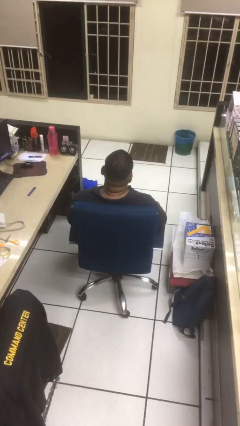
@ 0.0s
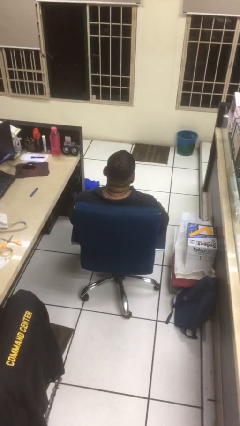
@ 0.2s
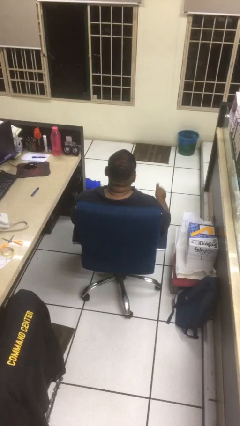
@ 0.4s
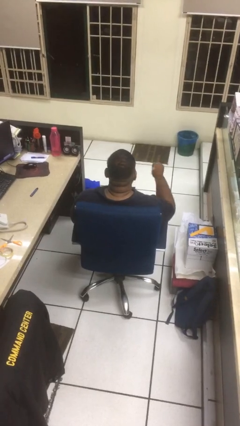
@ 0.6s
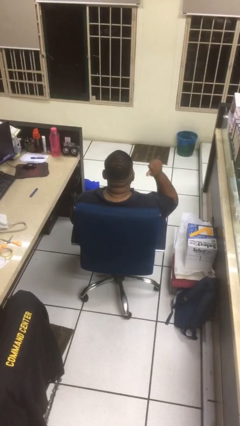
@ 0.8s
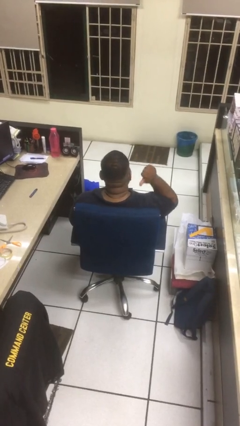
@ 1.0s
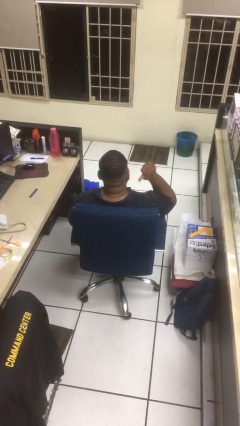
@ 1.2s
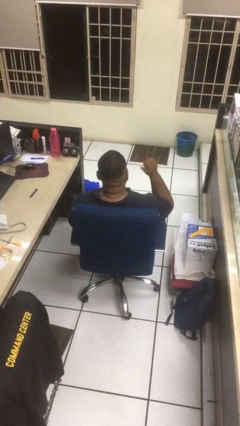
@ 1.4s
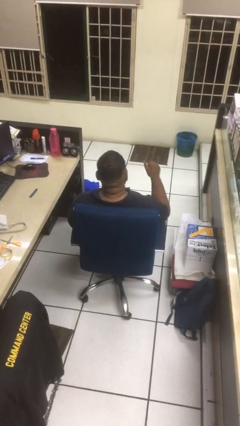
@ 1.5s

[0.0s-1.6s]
person gestures behind me

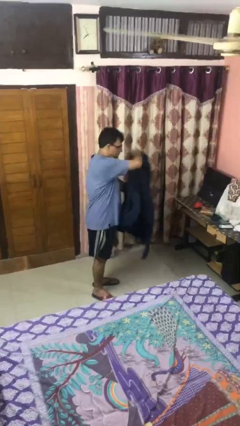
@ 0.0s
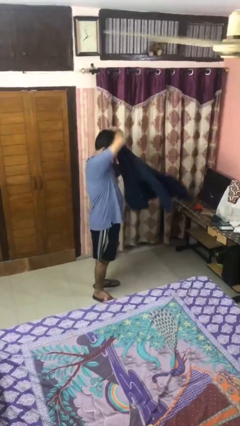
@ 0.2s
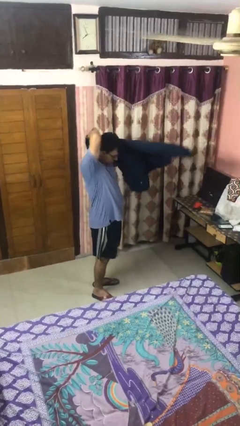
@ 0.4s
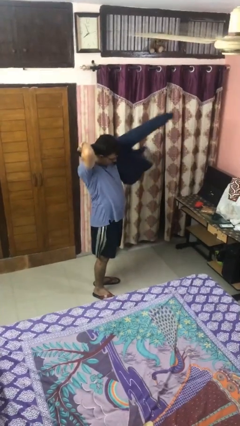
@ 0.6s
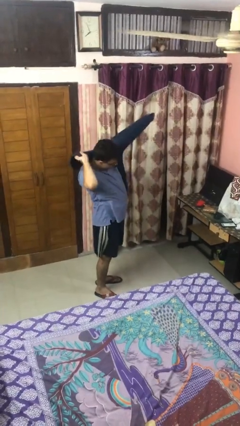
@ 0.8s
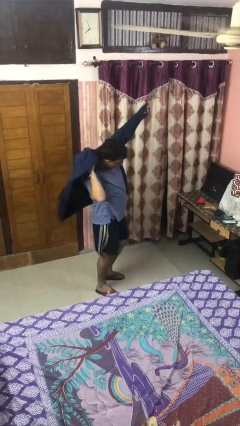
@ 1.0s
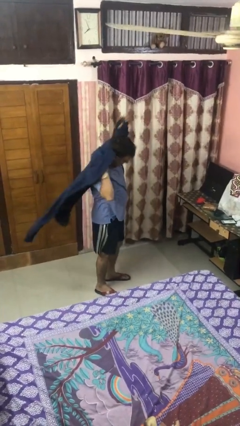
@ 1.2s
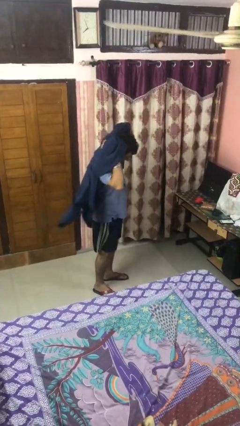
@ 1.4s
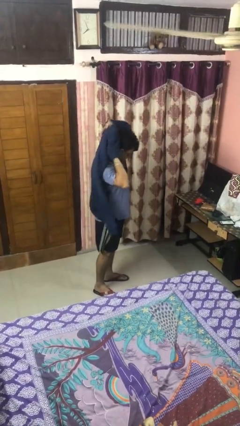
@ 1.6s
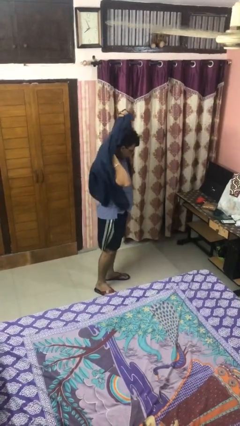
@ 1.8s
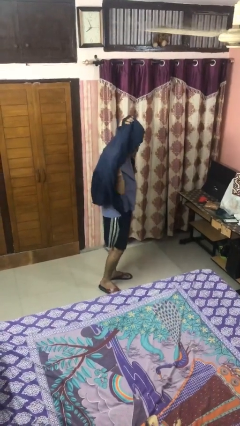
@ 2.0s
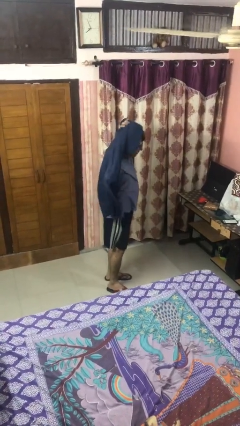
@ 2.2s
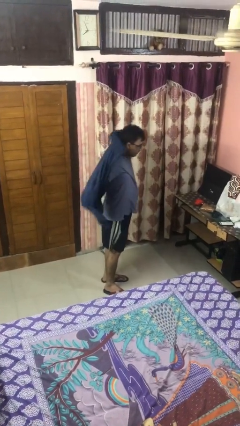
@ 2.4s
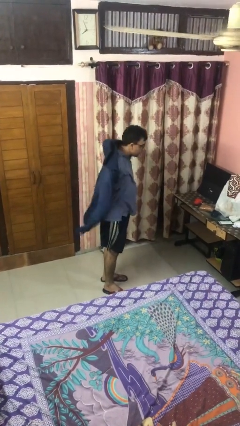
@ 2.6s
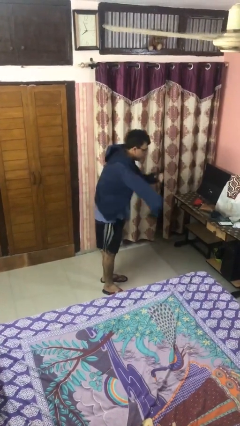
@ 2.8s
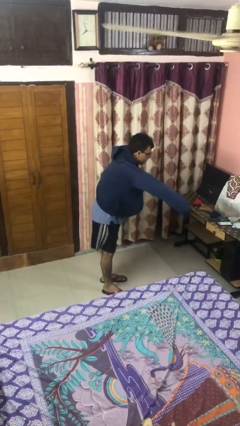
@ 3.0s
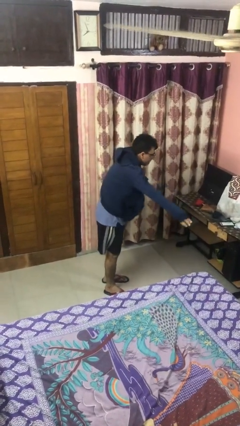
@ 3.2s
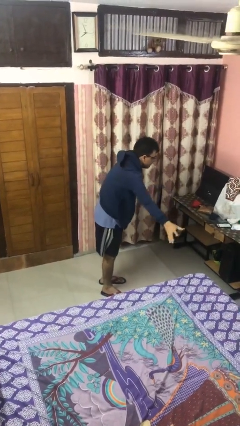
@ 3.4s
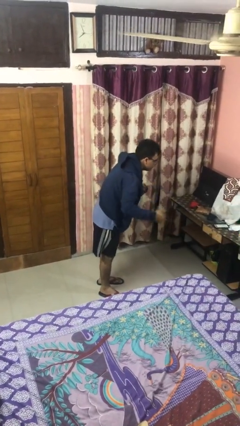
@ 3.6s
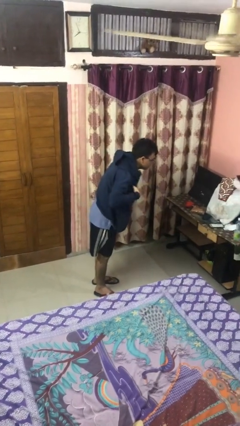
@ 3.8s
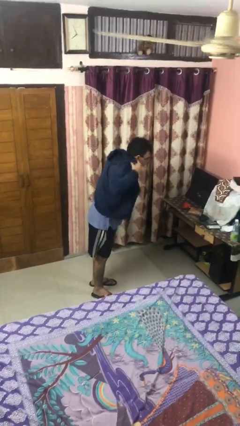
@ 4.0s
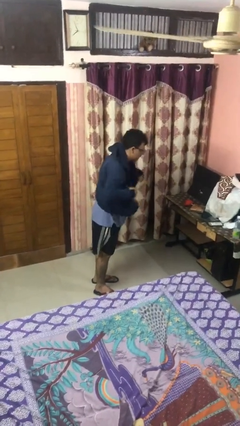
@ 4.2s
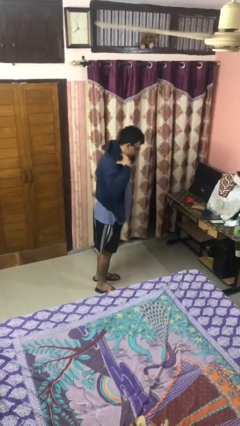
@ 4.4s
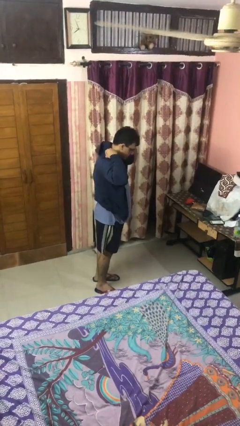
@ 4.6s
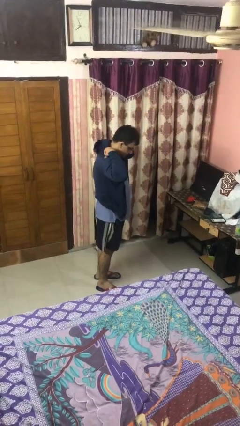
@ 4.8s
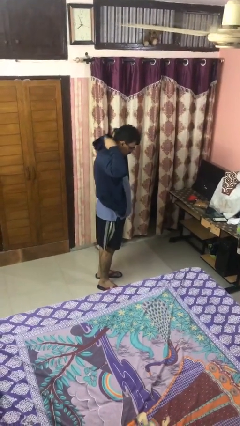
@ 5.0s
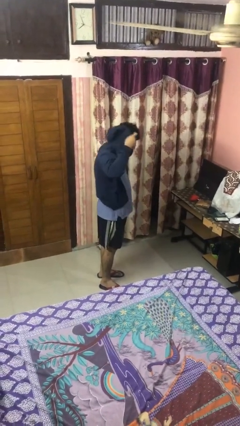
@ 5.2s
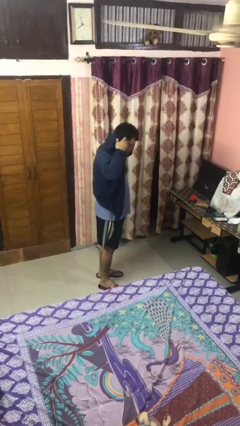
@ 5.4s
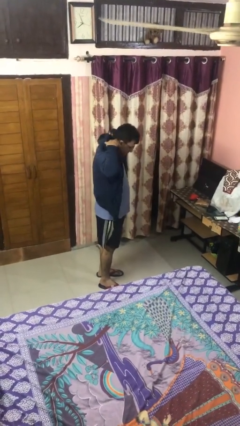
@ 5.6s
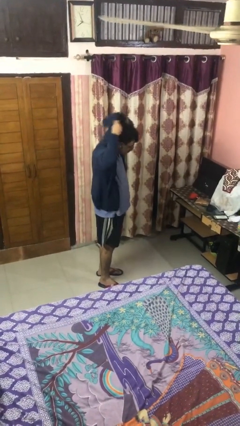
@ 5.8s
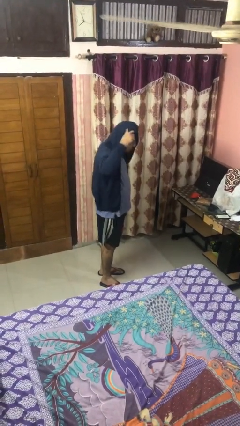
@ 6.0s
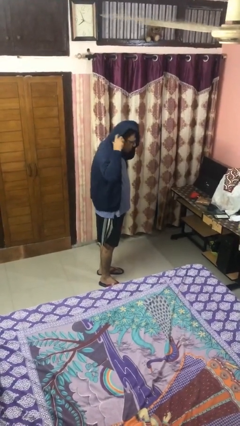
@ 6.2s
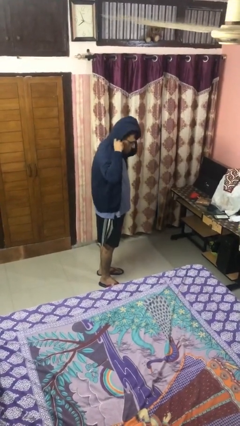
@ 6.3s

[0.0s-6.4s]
person puts on hoodie

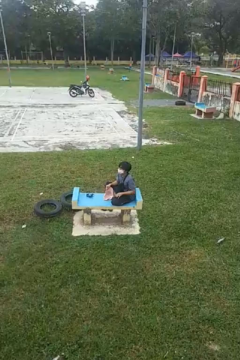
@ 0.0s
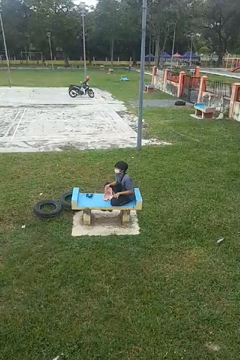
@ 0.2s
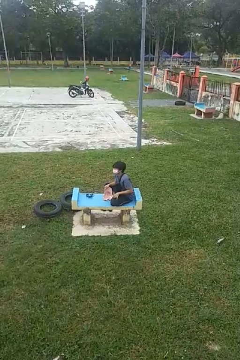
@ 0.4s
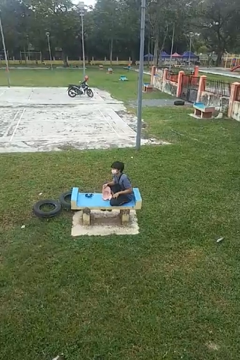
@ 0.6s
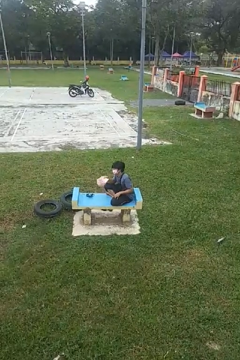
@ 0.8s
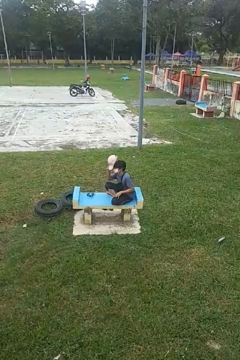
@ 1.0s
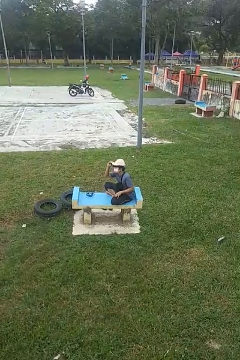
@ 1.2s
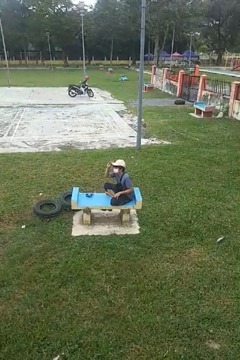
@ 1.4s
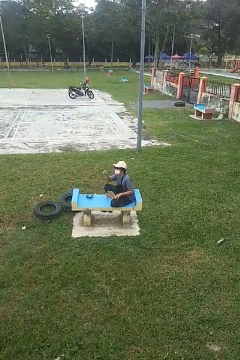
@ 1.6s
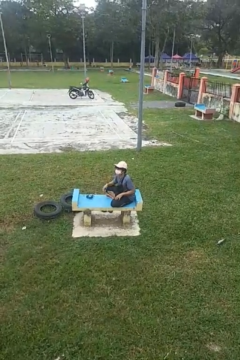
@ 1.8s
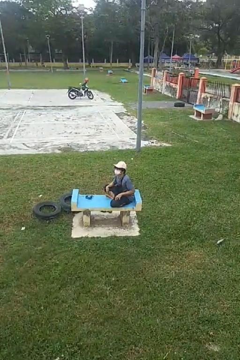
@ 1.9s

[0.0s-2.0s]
person puts on hat

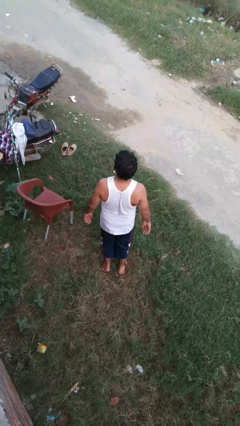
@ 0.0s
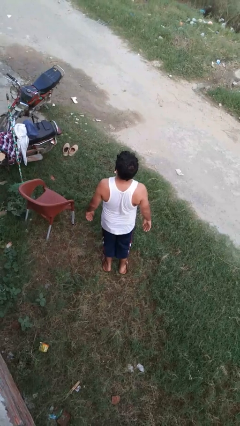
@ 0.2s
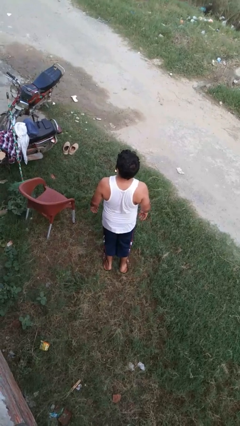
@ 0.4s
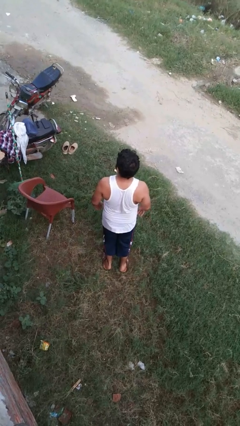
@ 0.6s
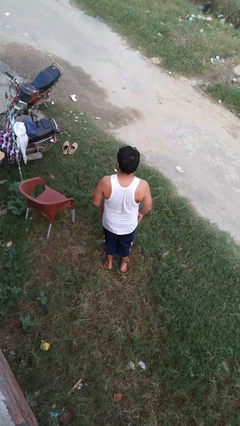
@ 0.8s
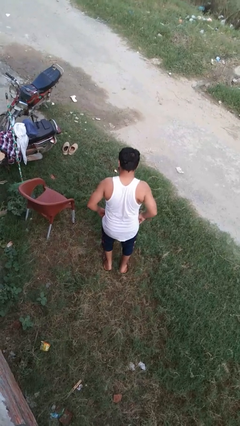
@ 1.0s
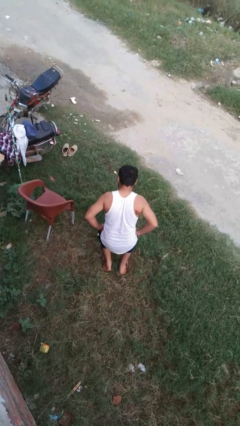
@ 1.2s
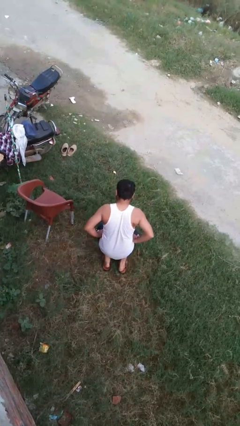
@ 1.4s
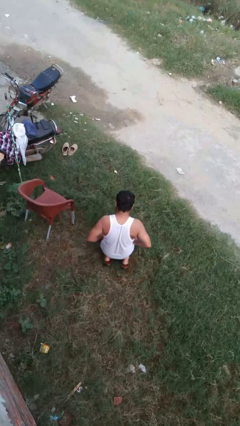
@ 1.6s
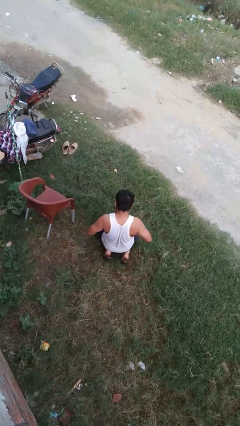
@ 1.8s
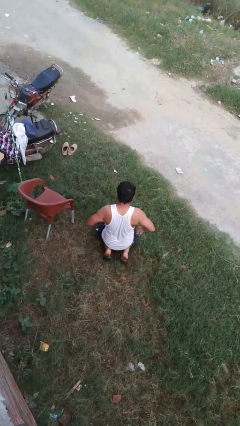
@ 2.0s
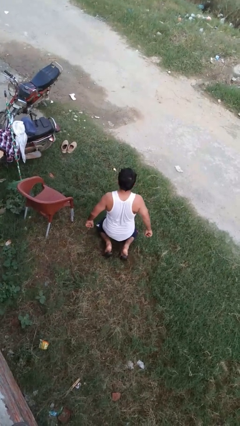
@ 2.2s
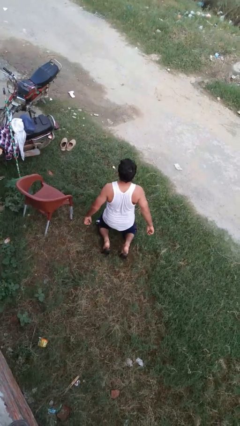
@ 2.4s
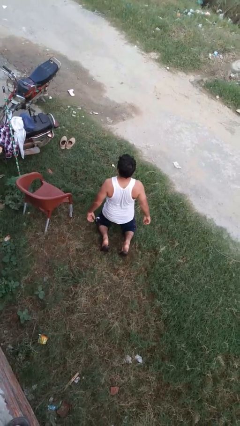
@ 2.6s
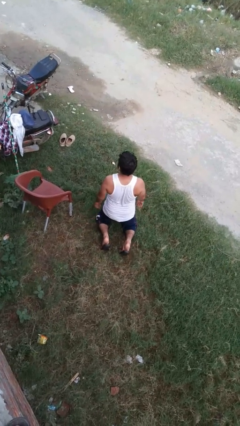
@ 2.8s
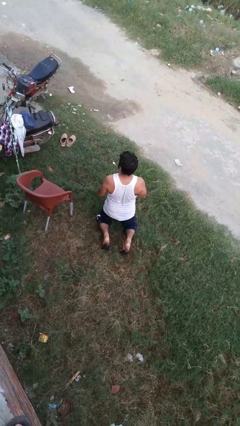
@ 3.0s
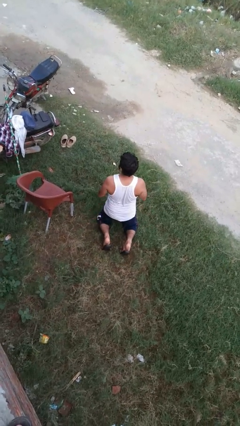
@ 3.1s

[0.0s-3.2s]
person kneels

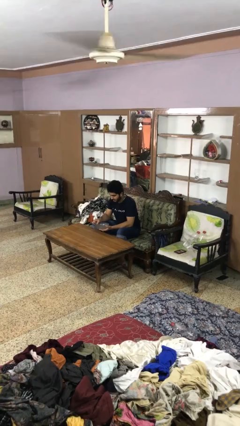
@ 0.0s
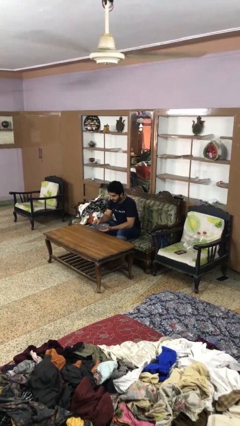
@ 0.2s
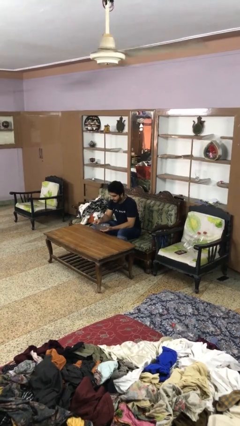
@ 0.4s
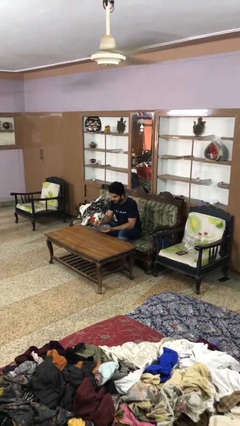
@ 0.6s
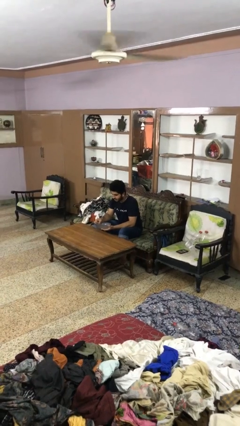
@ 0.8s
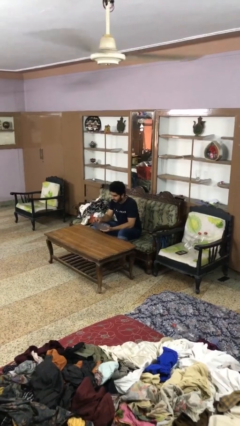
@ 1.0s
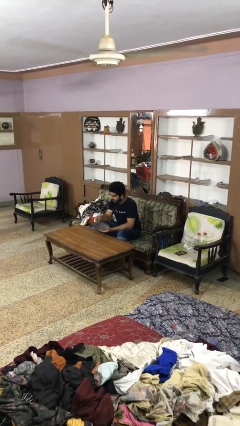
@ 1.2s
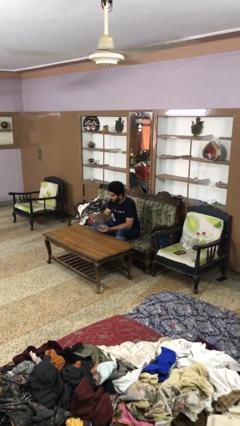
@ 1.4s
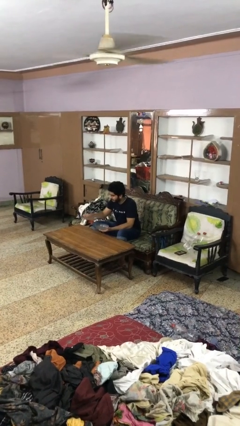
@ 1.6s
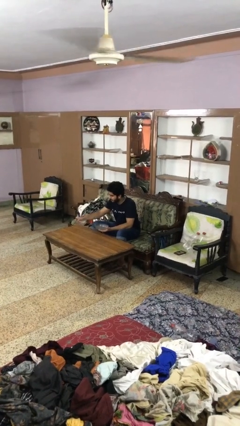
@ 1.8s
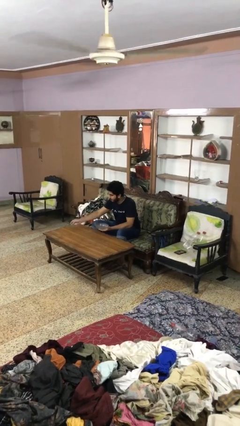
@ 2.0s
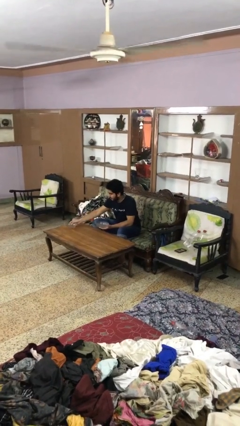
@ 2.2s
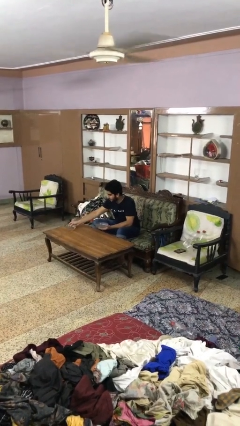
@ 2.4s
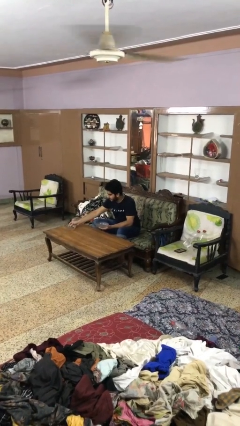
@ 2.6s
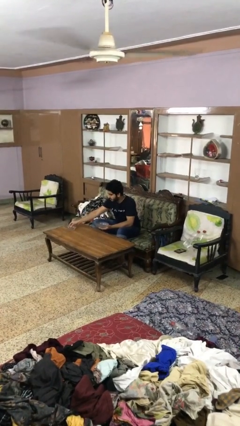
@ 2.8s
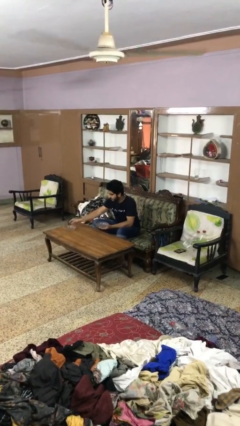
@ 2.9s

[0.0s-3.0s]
person sets table

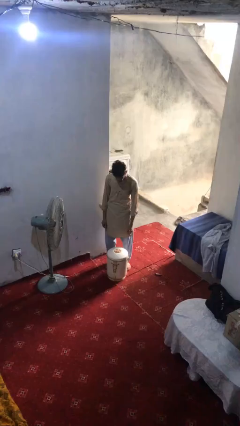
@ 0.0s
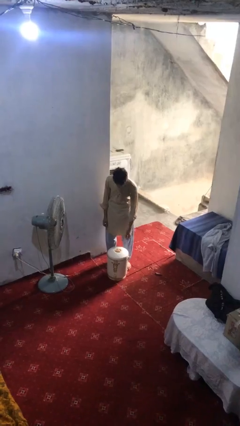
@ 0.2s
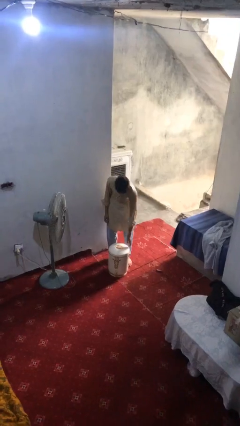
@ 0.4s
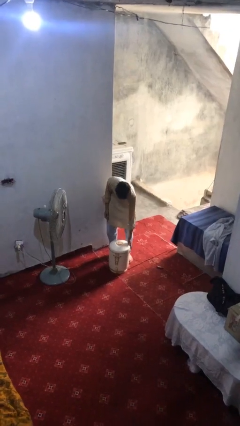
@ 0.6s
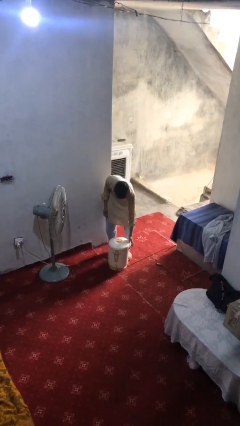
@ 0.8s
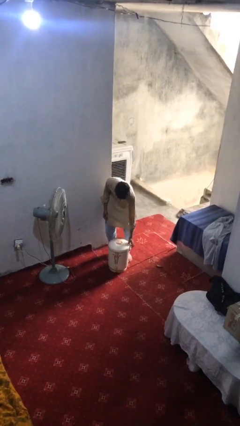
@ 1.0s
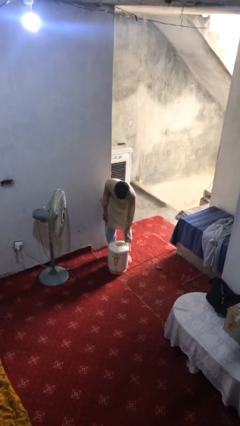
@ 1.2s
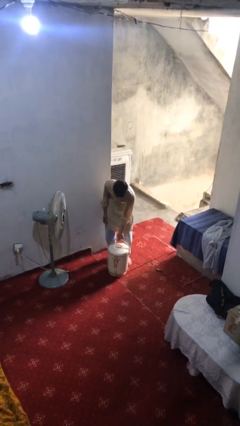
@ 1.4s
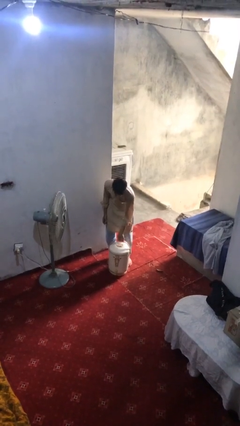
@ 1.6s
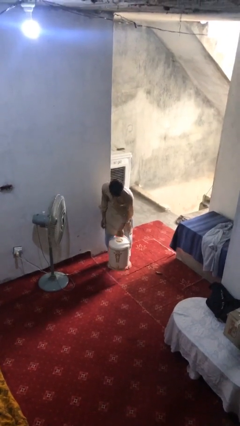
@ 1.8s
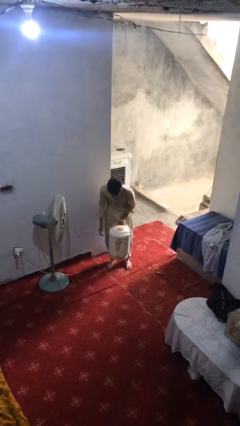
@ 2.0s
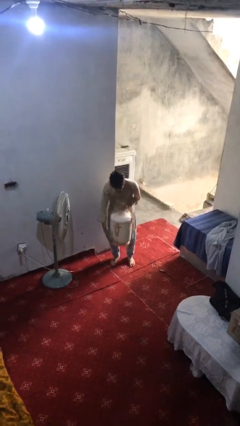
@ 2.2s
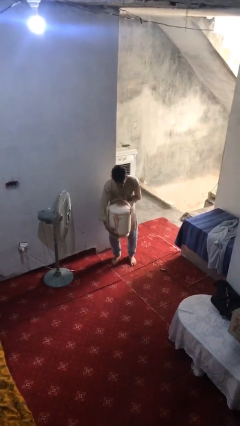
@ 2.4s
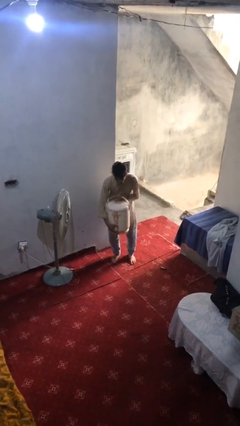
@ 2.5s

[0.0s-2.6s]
person picks up object from floor
